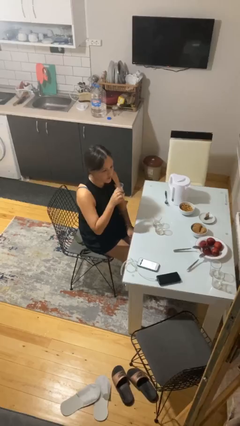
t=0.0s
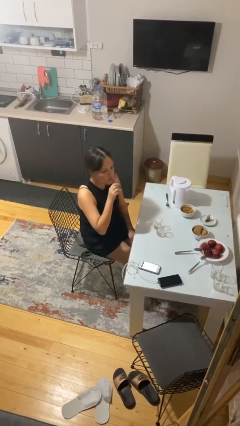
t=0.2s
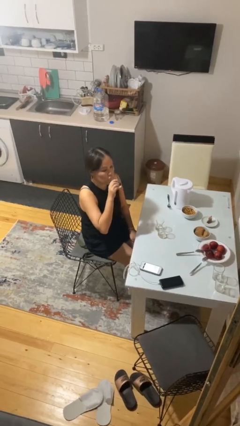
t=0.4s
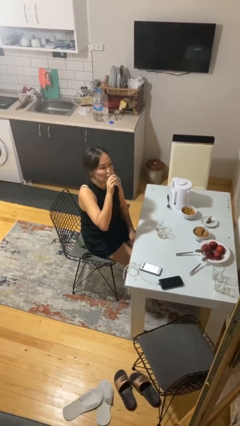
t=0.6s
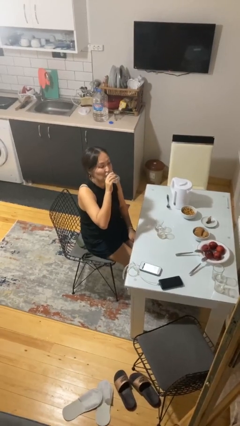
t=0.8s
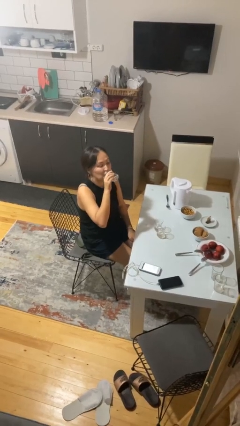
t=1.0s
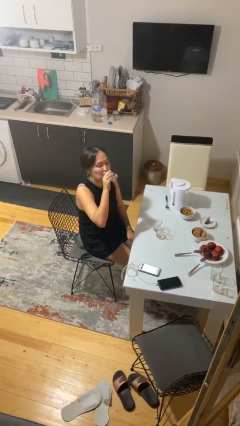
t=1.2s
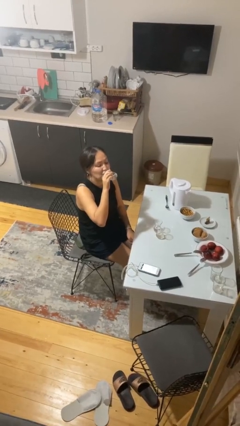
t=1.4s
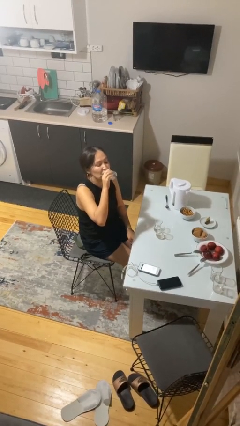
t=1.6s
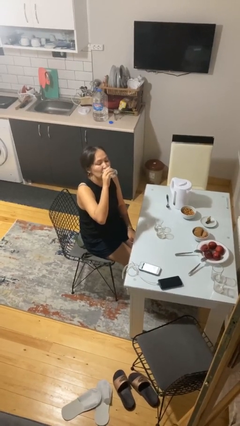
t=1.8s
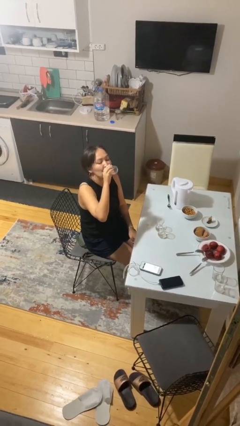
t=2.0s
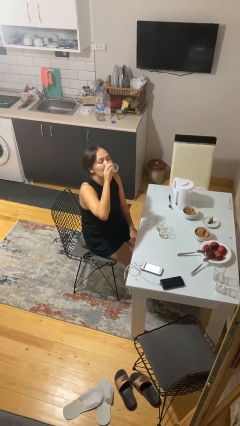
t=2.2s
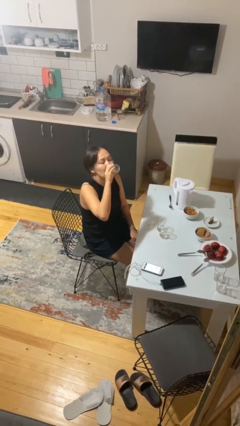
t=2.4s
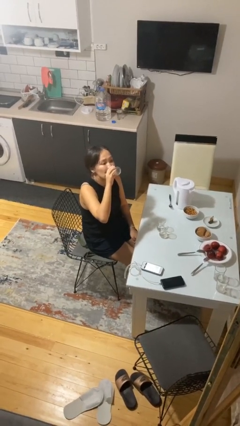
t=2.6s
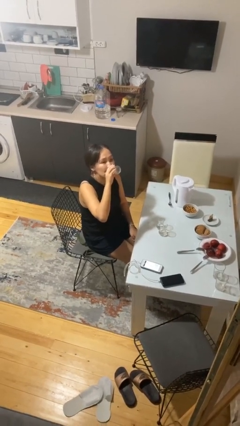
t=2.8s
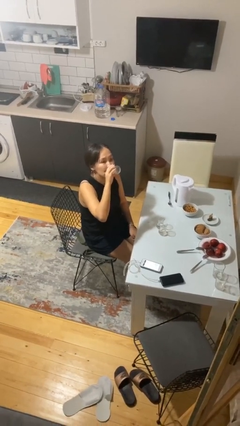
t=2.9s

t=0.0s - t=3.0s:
person drinks from shotglass

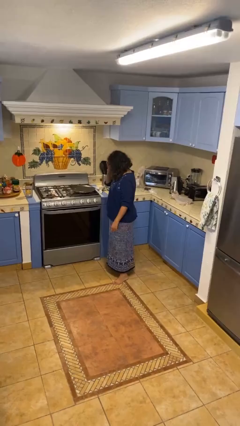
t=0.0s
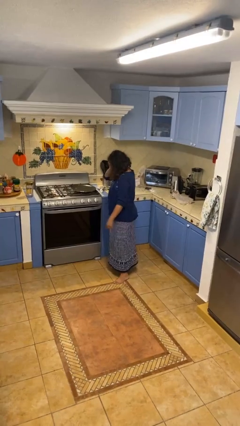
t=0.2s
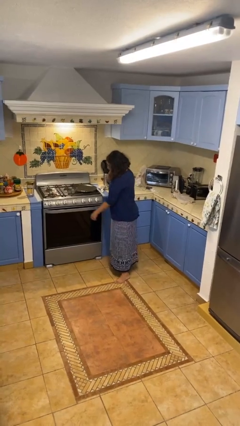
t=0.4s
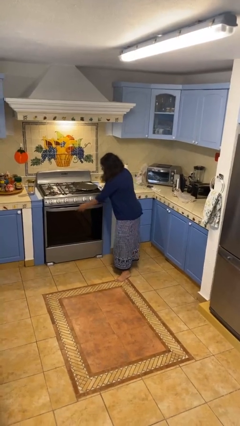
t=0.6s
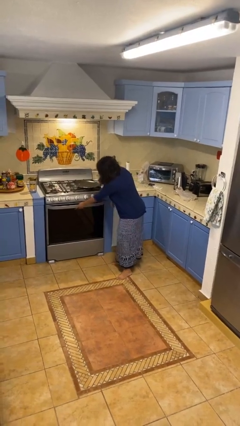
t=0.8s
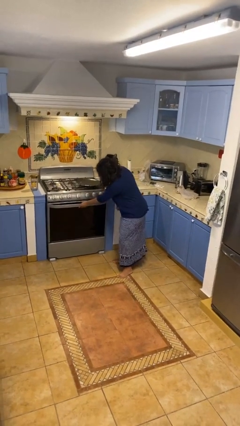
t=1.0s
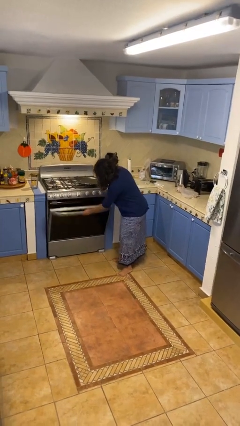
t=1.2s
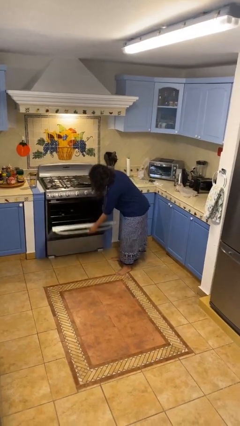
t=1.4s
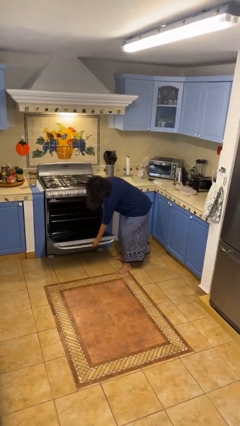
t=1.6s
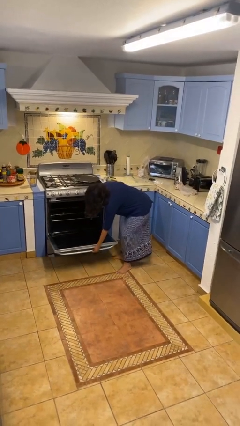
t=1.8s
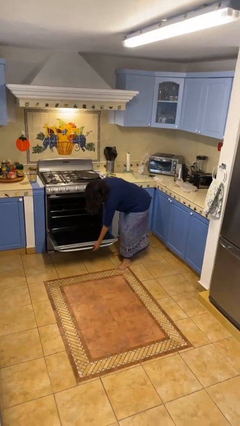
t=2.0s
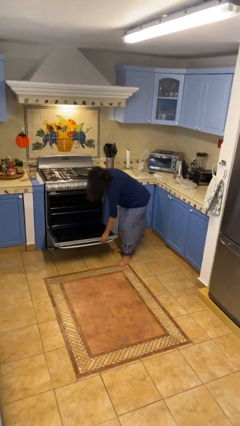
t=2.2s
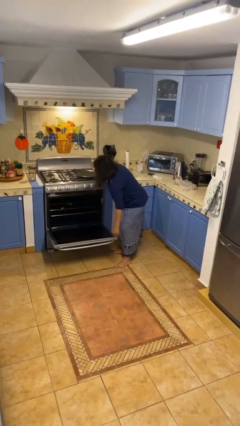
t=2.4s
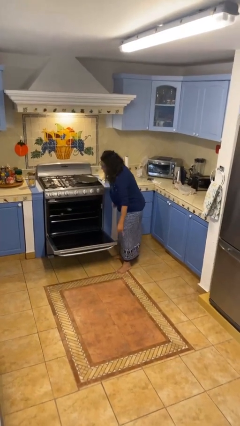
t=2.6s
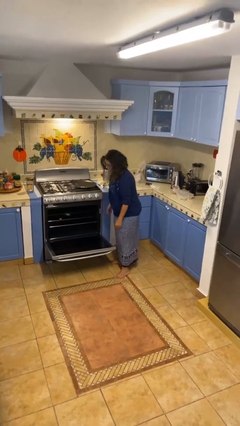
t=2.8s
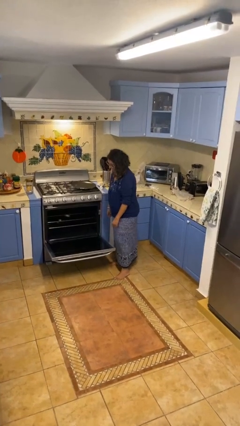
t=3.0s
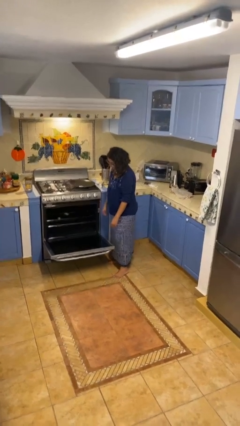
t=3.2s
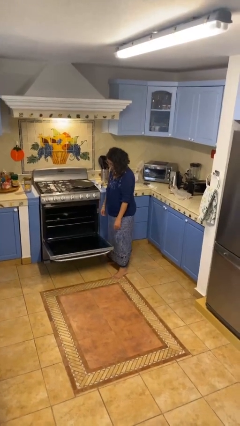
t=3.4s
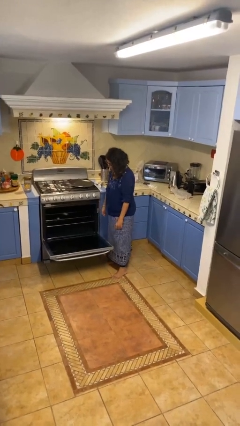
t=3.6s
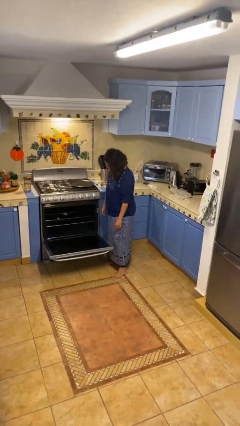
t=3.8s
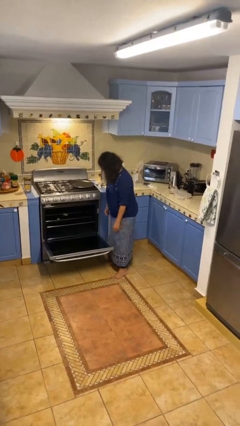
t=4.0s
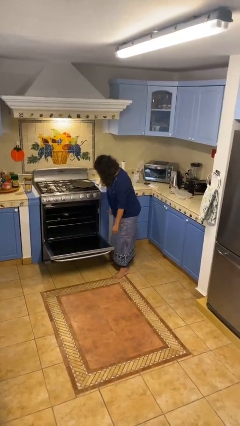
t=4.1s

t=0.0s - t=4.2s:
person opens oven door

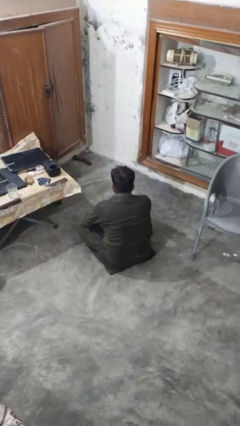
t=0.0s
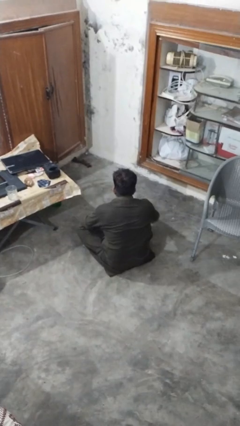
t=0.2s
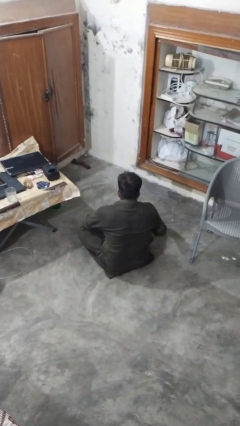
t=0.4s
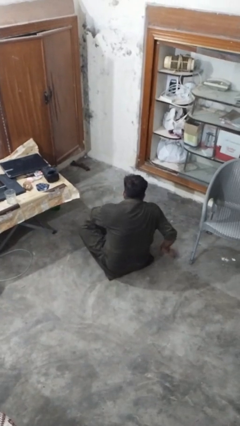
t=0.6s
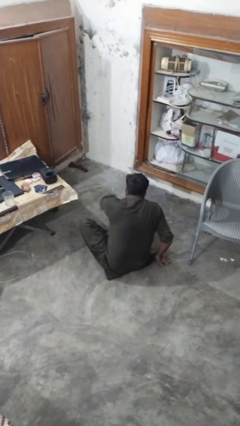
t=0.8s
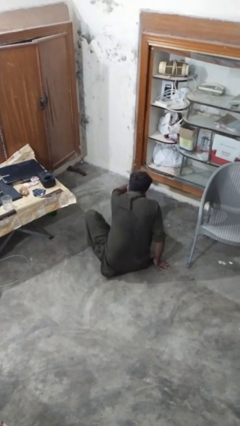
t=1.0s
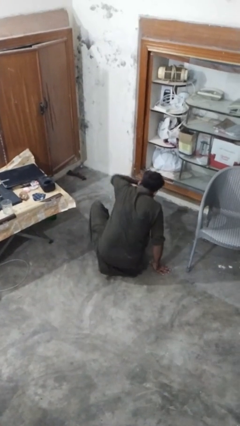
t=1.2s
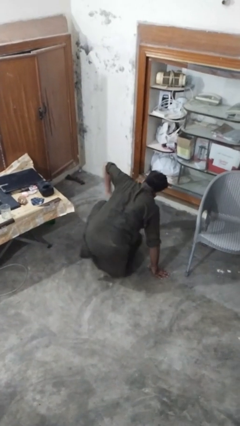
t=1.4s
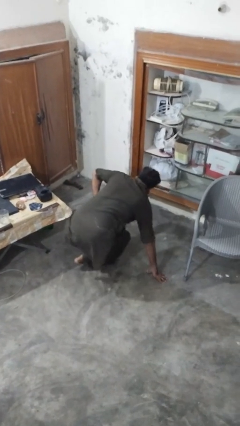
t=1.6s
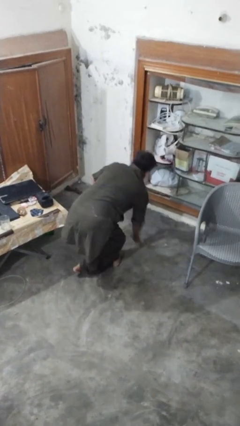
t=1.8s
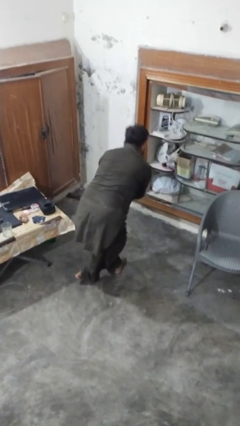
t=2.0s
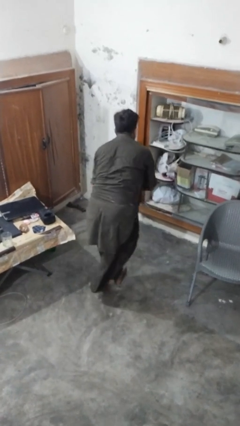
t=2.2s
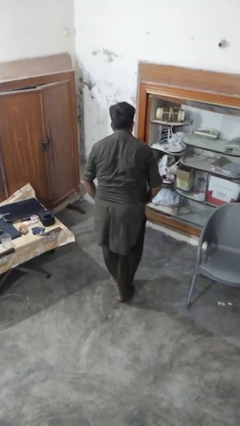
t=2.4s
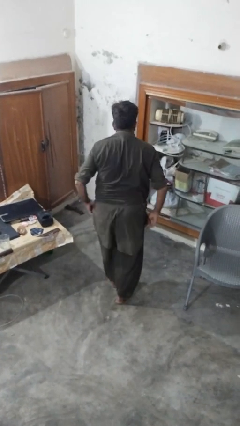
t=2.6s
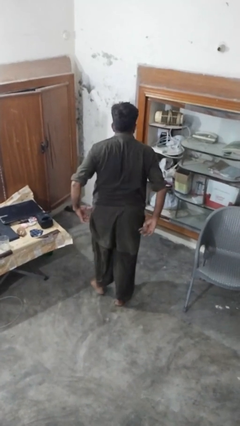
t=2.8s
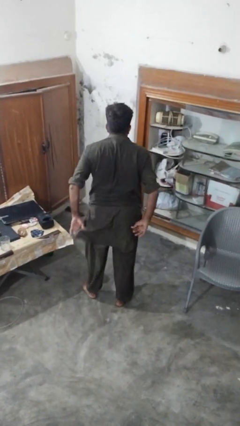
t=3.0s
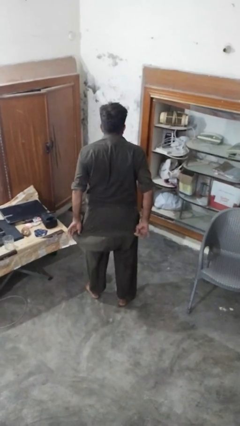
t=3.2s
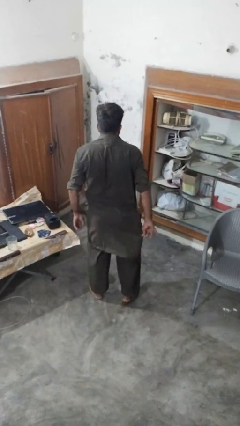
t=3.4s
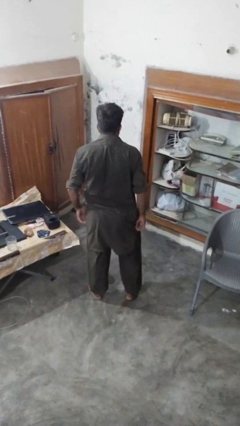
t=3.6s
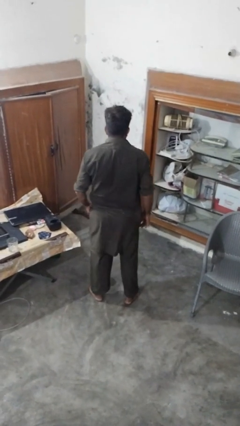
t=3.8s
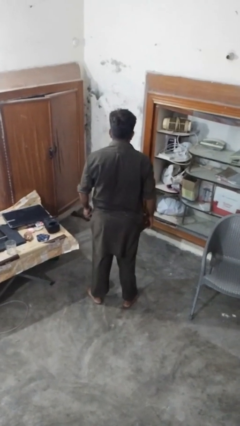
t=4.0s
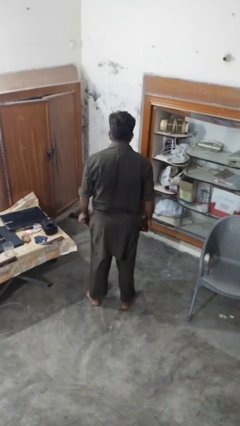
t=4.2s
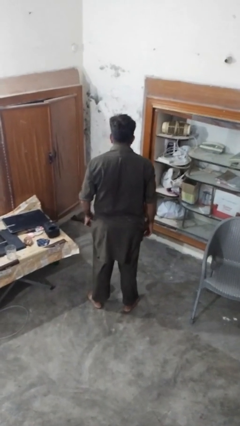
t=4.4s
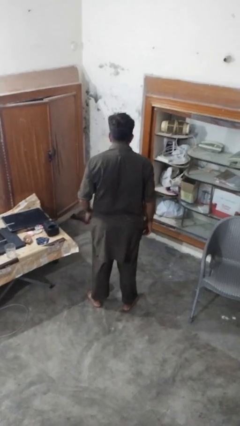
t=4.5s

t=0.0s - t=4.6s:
person stands up from floor

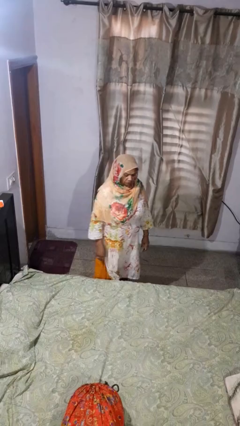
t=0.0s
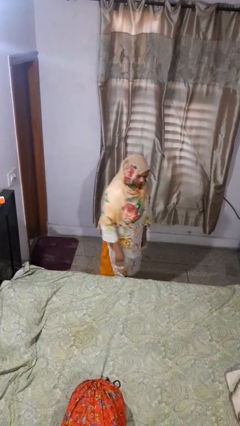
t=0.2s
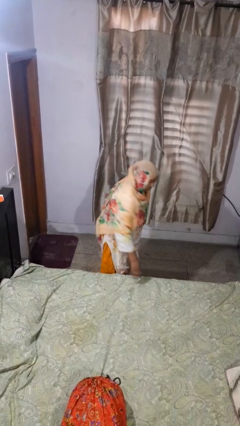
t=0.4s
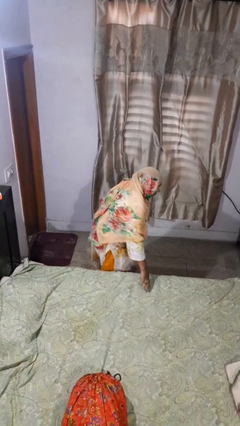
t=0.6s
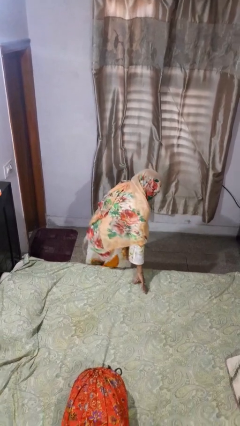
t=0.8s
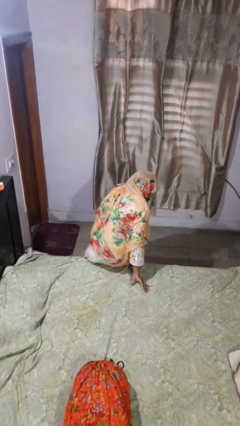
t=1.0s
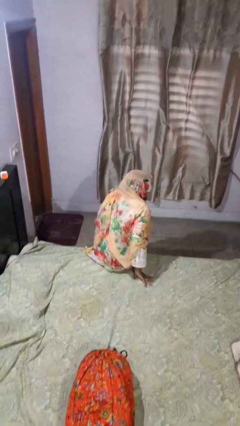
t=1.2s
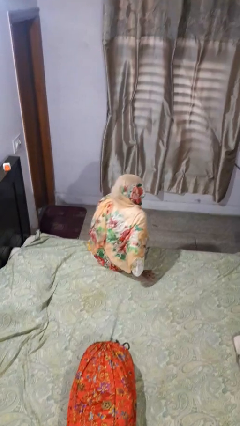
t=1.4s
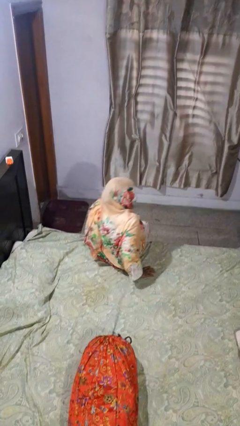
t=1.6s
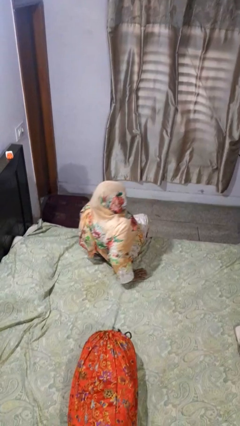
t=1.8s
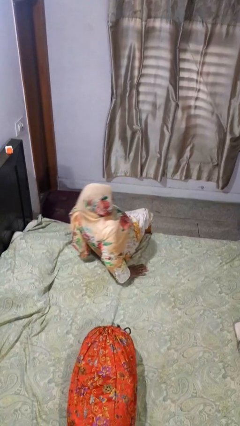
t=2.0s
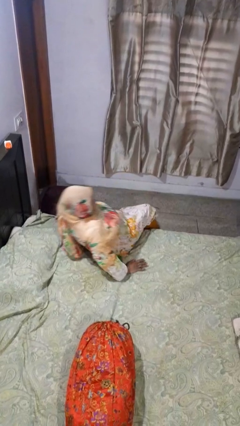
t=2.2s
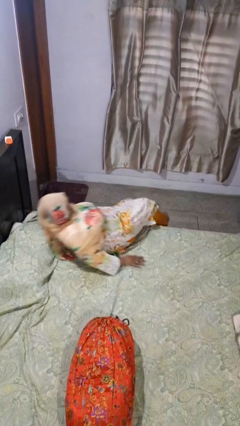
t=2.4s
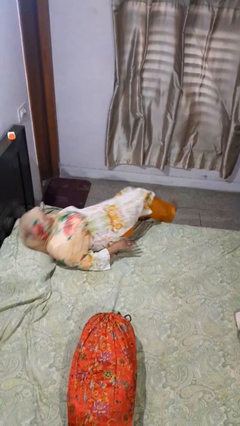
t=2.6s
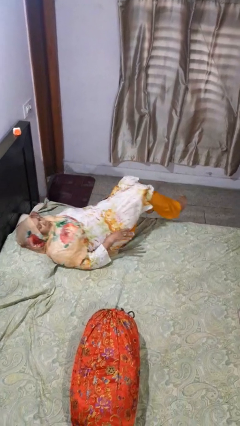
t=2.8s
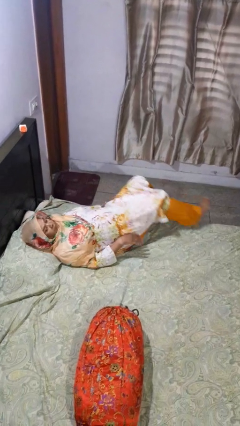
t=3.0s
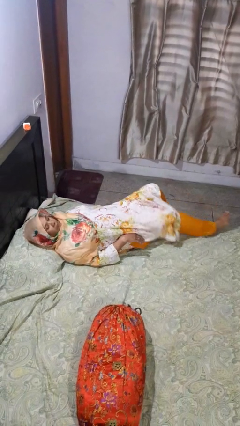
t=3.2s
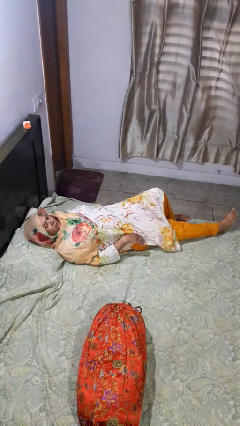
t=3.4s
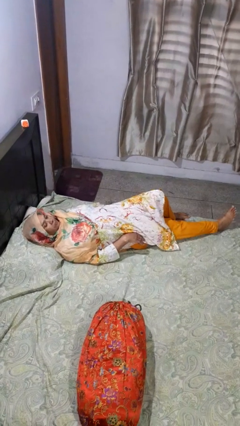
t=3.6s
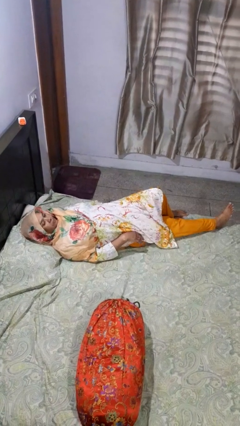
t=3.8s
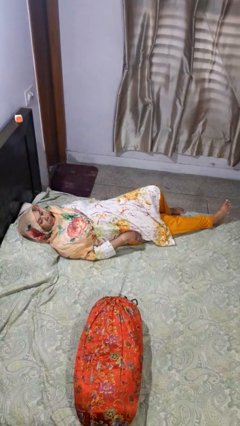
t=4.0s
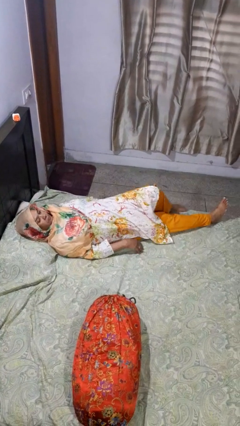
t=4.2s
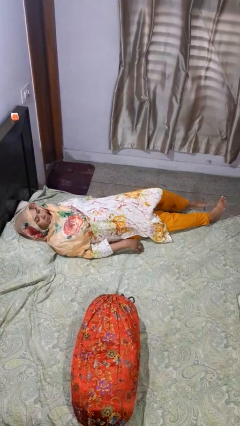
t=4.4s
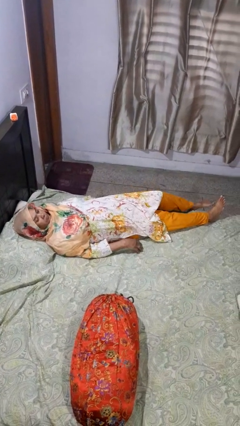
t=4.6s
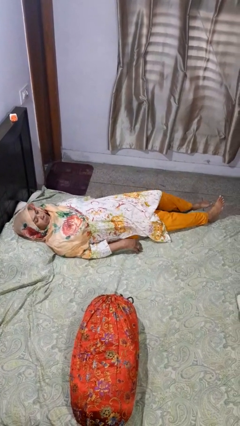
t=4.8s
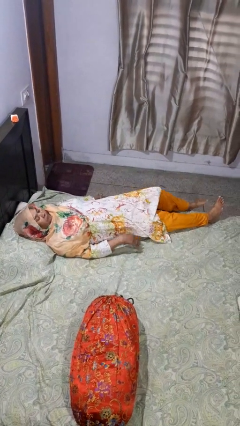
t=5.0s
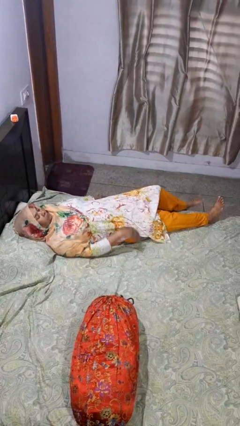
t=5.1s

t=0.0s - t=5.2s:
person lies down on bed

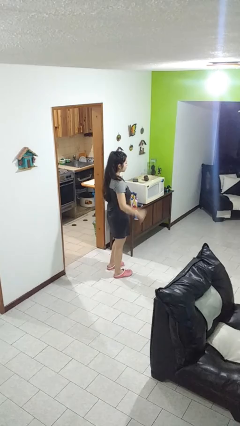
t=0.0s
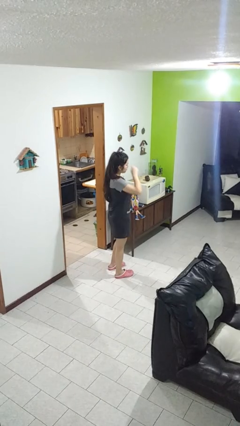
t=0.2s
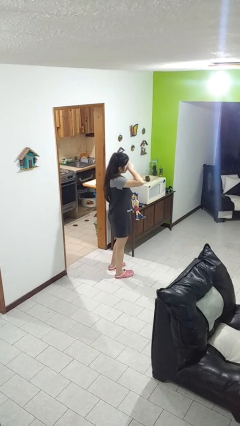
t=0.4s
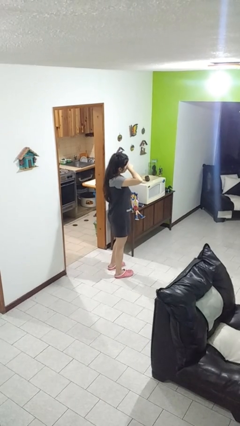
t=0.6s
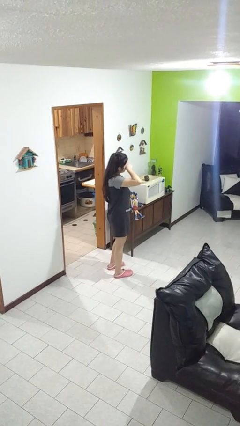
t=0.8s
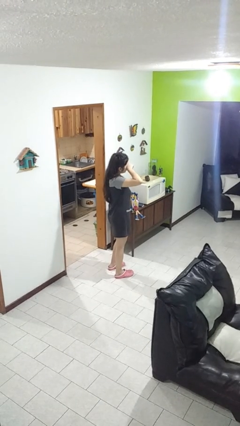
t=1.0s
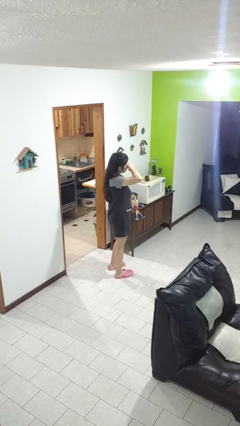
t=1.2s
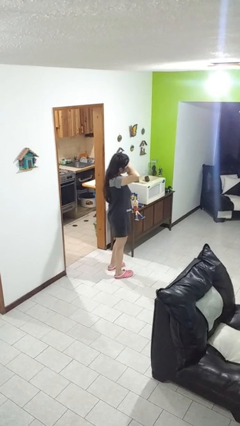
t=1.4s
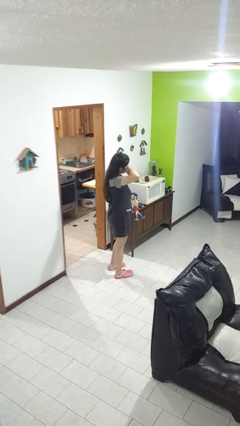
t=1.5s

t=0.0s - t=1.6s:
person rubs eyes
